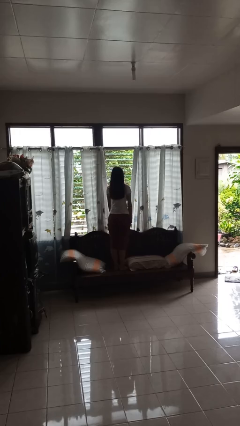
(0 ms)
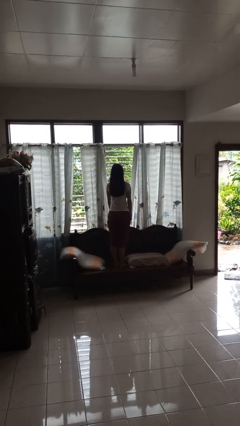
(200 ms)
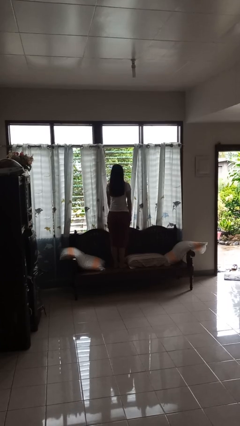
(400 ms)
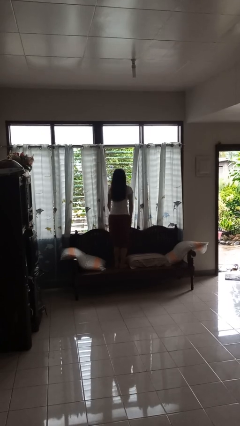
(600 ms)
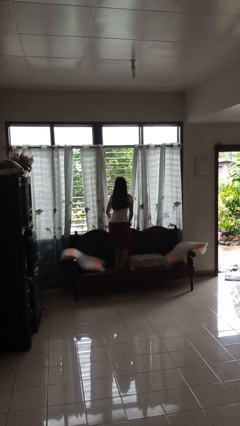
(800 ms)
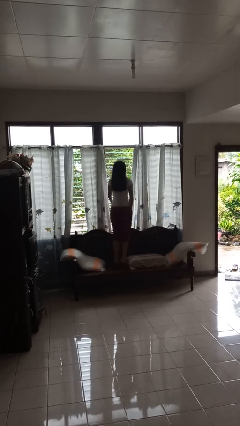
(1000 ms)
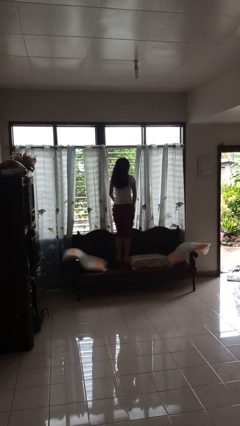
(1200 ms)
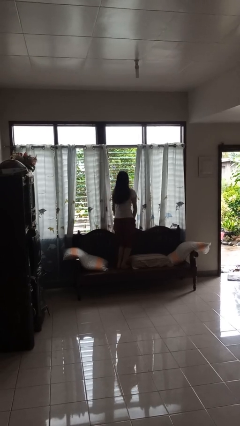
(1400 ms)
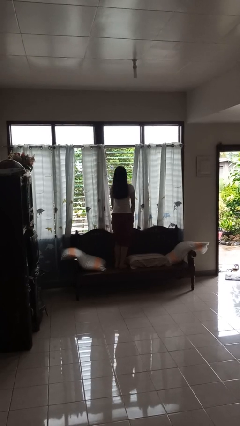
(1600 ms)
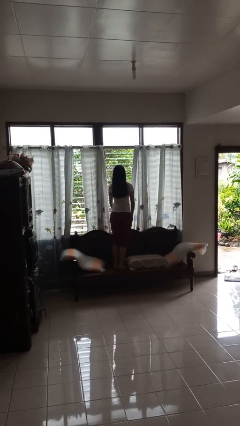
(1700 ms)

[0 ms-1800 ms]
person jumps on couch

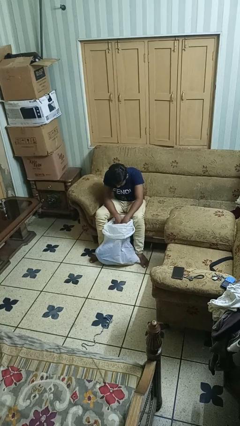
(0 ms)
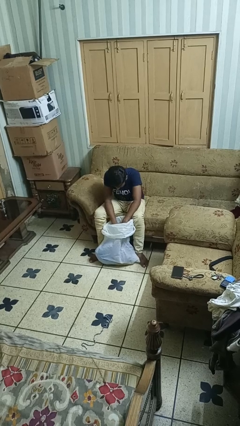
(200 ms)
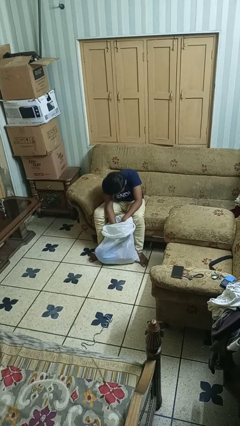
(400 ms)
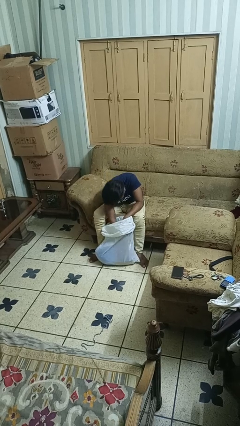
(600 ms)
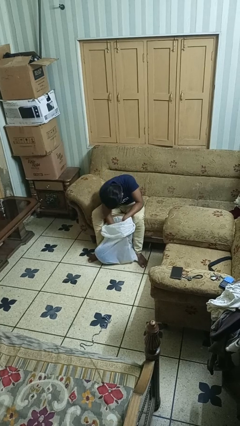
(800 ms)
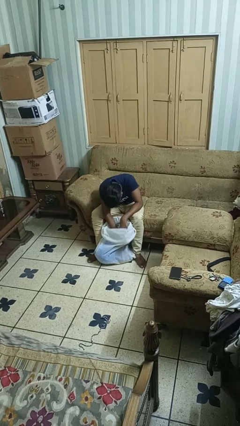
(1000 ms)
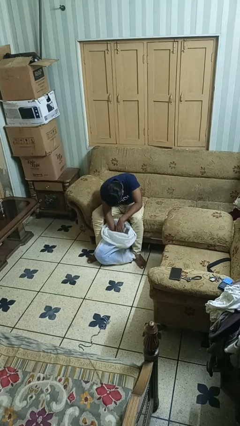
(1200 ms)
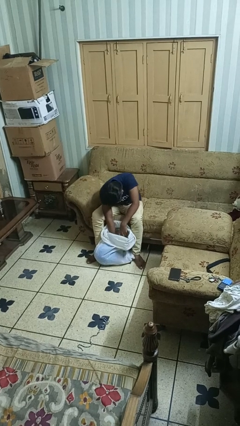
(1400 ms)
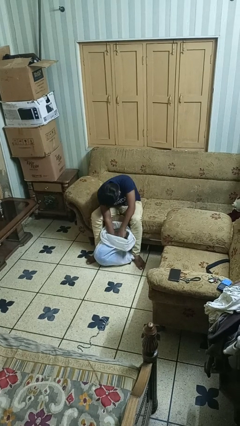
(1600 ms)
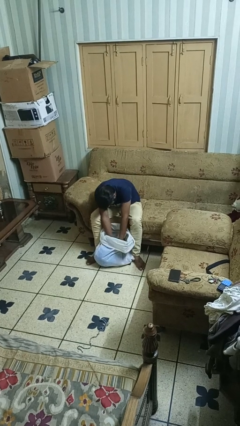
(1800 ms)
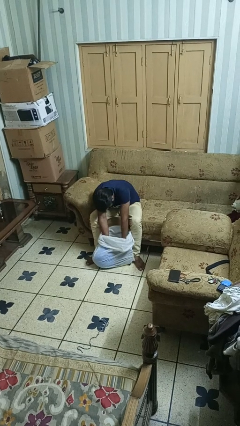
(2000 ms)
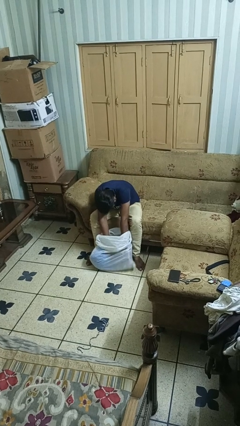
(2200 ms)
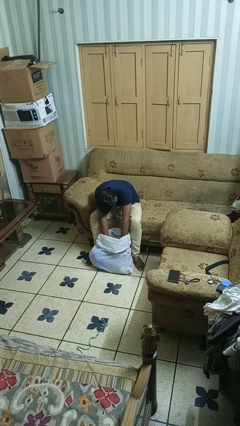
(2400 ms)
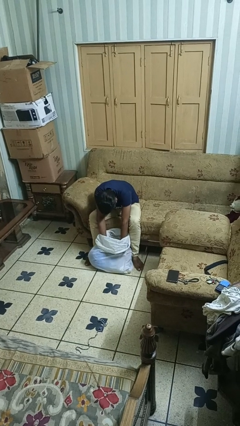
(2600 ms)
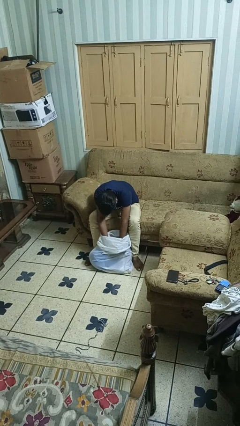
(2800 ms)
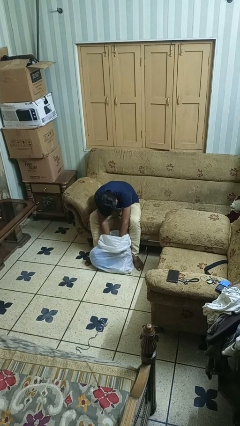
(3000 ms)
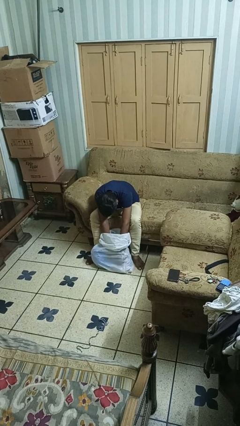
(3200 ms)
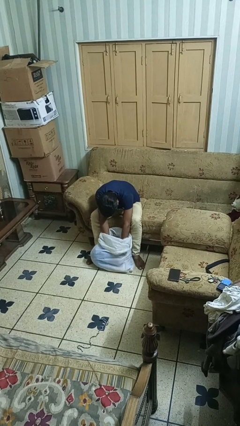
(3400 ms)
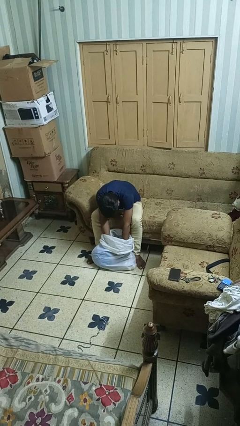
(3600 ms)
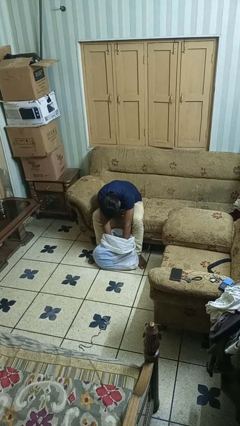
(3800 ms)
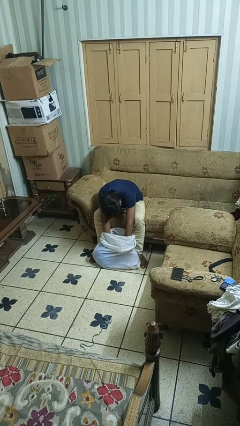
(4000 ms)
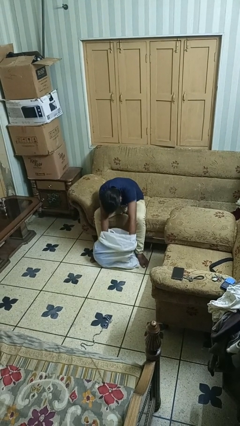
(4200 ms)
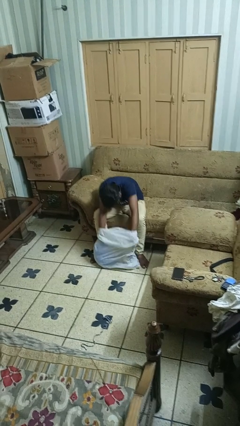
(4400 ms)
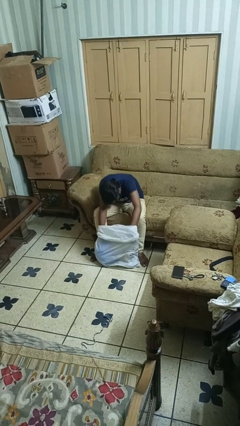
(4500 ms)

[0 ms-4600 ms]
person searches in bag

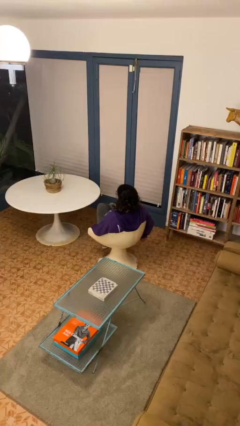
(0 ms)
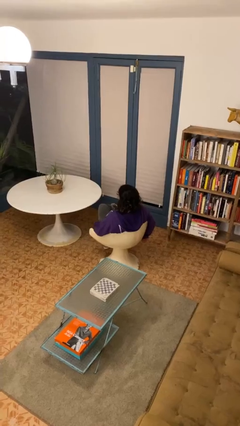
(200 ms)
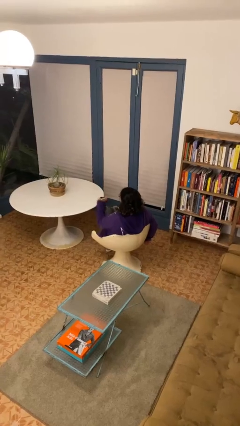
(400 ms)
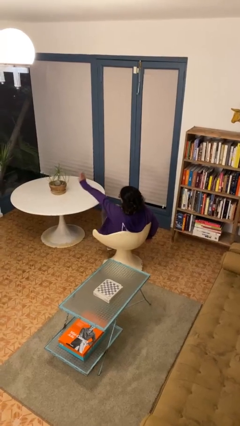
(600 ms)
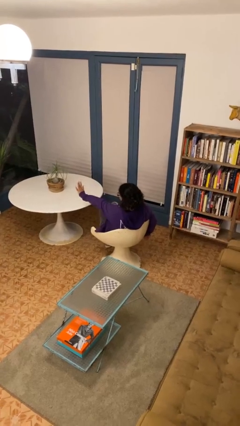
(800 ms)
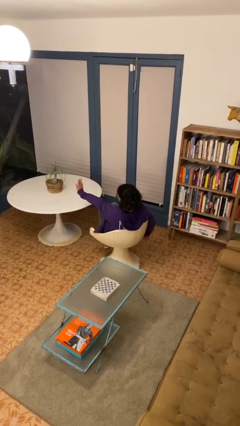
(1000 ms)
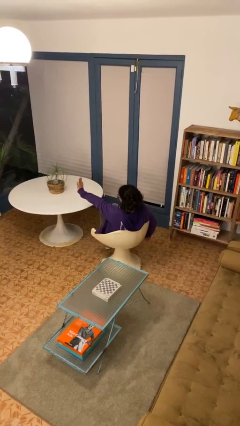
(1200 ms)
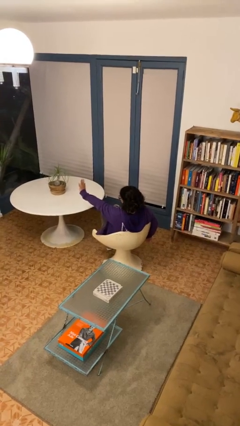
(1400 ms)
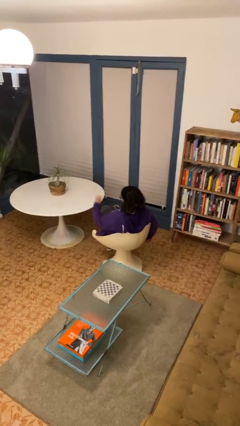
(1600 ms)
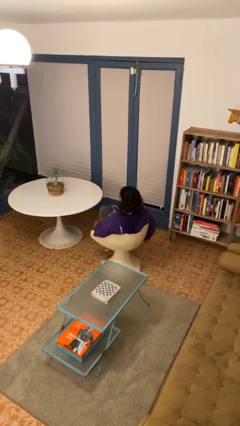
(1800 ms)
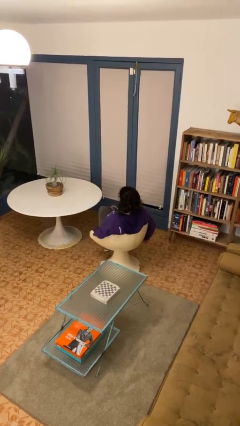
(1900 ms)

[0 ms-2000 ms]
person gestures stop

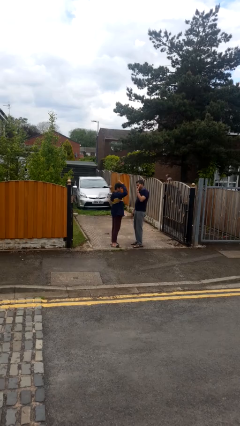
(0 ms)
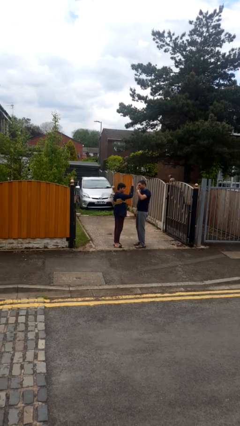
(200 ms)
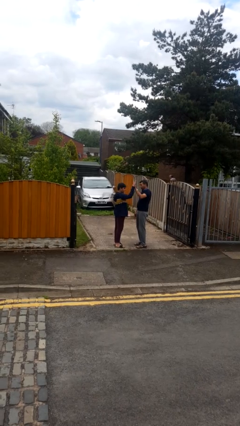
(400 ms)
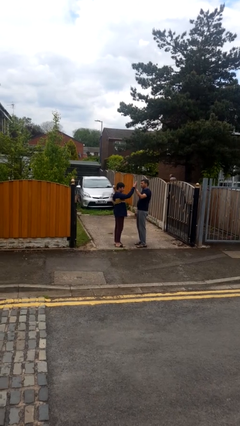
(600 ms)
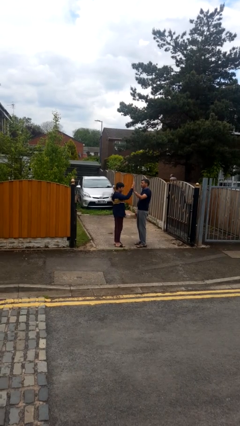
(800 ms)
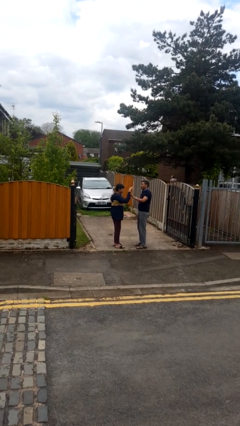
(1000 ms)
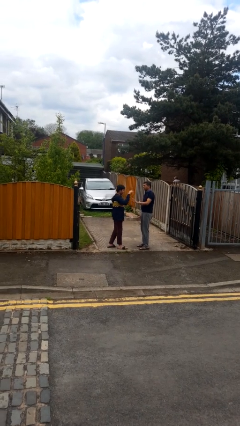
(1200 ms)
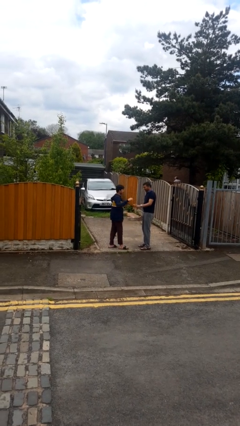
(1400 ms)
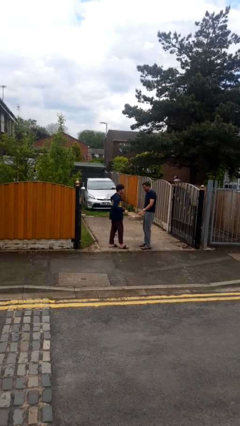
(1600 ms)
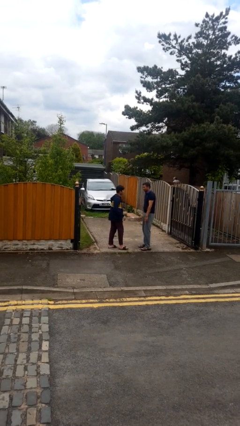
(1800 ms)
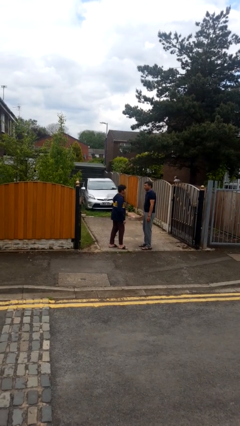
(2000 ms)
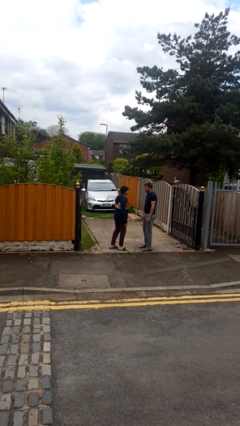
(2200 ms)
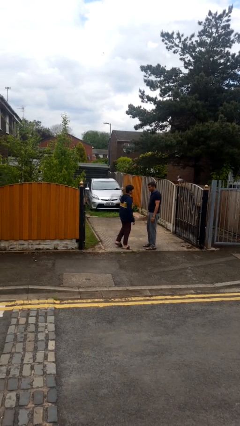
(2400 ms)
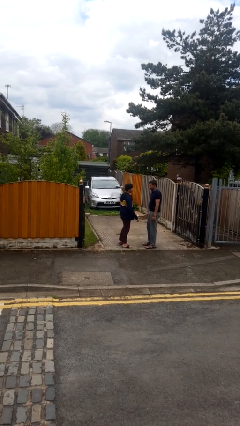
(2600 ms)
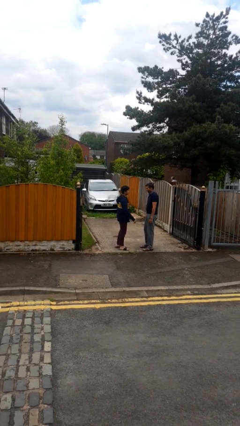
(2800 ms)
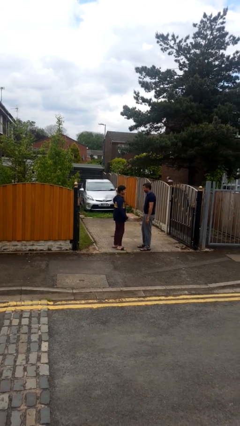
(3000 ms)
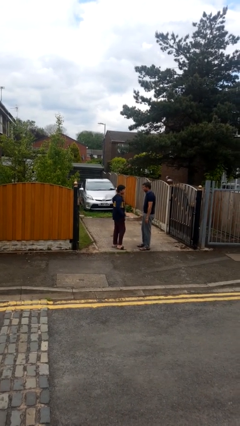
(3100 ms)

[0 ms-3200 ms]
person highfives hand

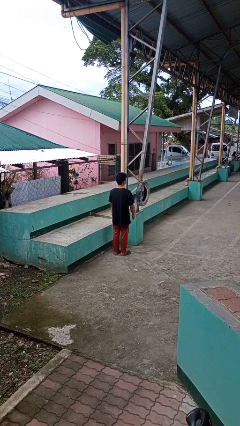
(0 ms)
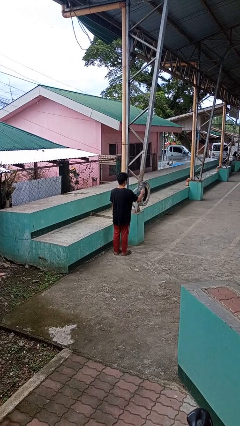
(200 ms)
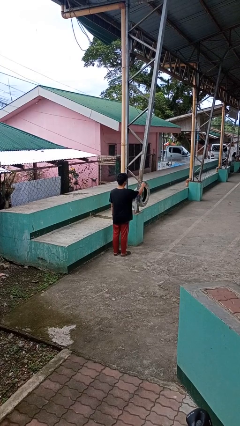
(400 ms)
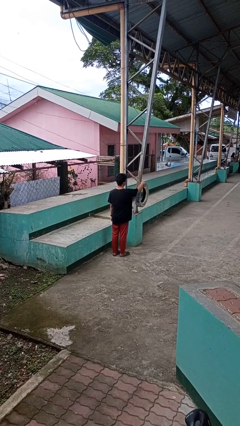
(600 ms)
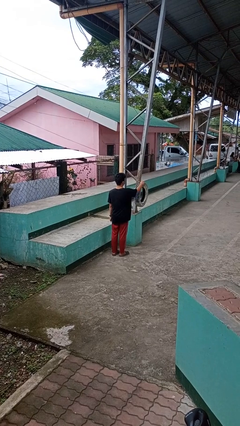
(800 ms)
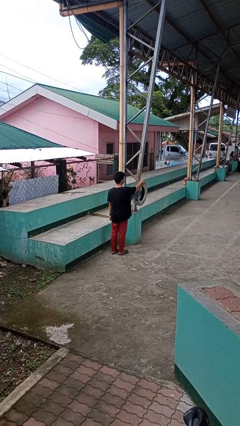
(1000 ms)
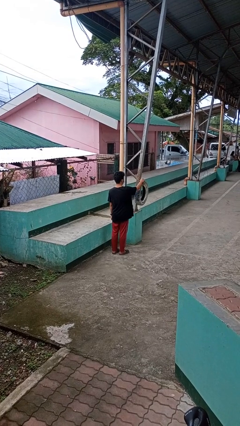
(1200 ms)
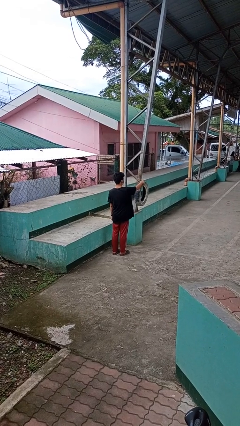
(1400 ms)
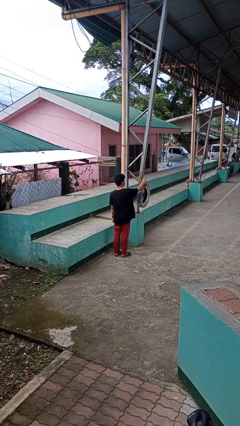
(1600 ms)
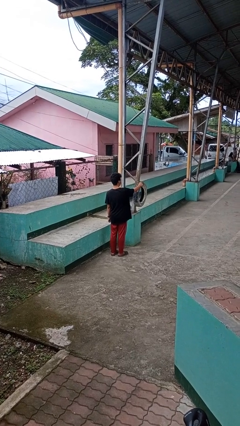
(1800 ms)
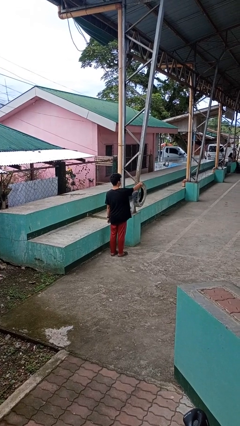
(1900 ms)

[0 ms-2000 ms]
person taps object with finger

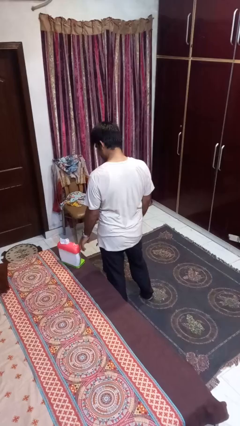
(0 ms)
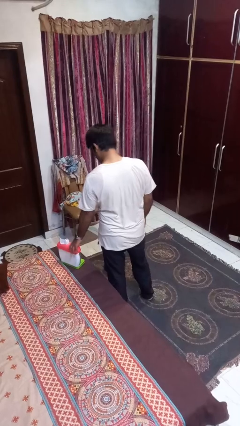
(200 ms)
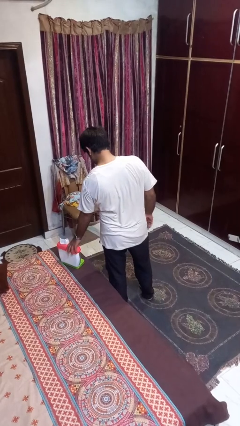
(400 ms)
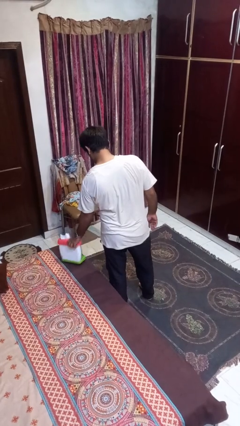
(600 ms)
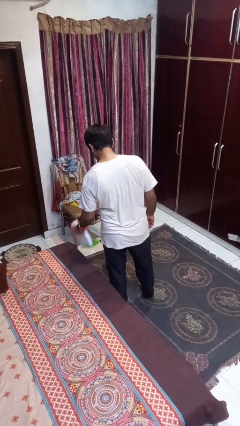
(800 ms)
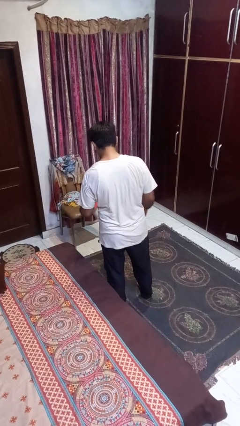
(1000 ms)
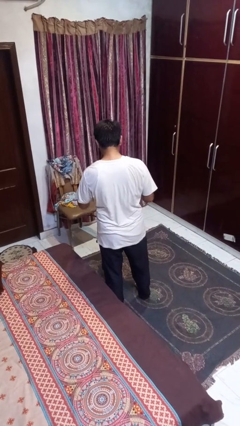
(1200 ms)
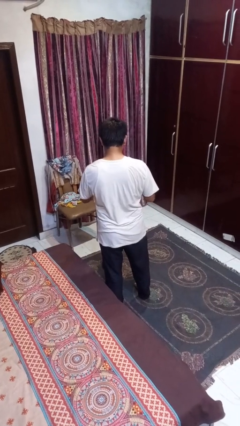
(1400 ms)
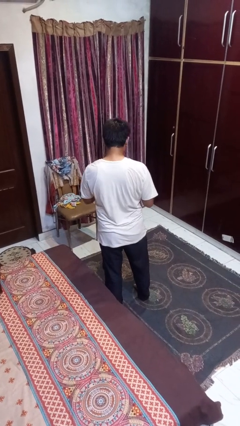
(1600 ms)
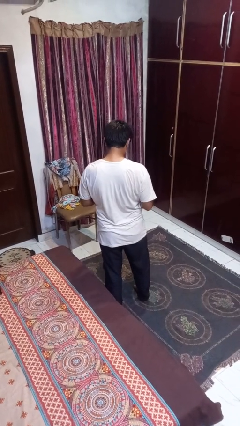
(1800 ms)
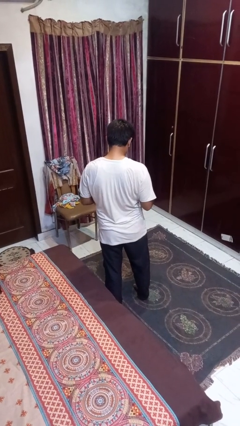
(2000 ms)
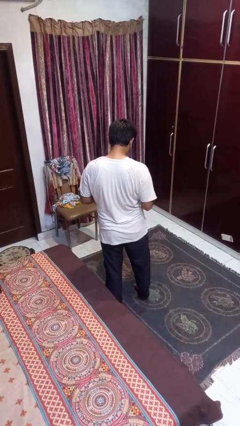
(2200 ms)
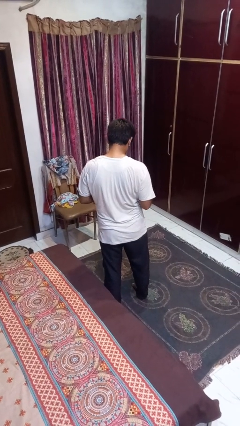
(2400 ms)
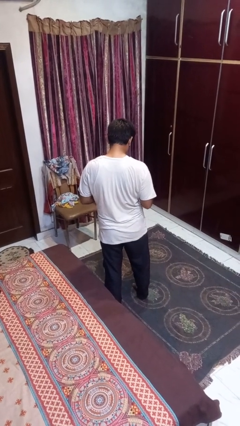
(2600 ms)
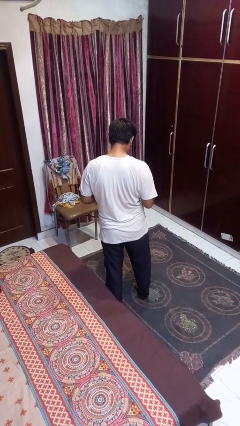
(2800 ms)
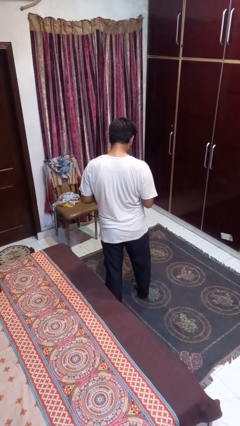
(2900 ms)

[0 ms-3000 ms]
person picks up object from bed

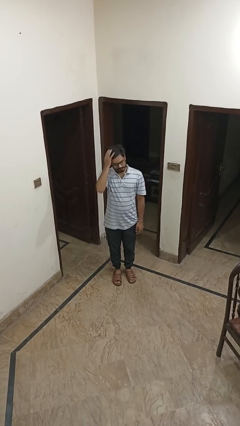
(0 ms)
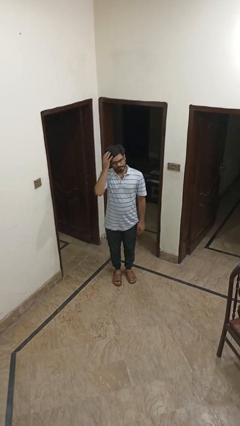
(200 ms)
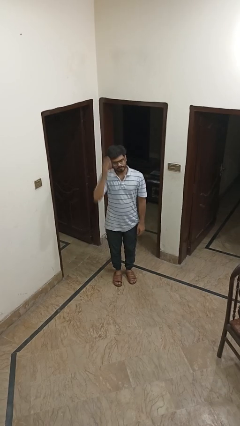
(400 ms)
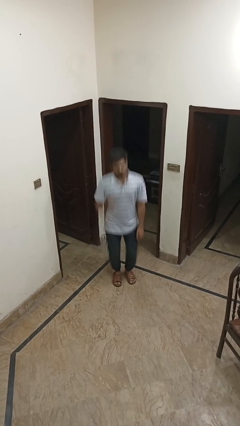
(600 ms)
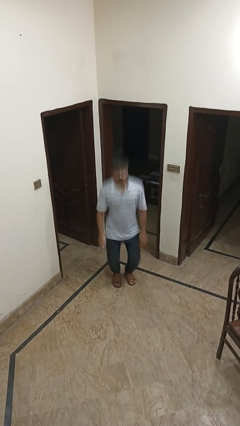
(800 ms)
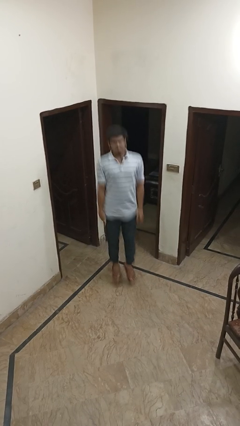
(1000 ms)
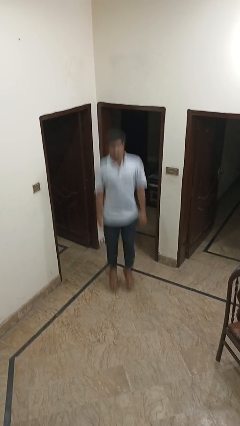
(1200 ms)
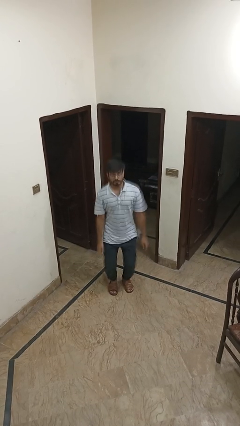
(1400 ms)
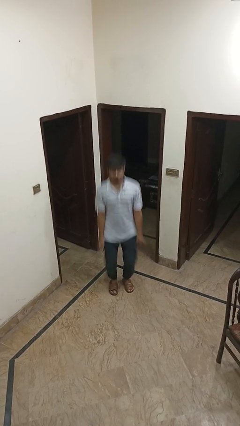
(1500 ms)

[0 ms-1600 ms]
person jumps
